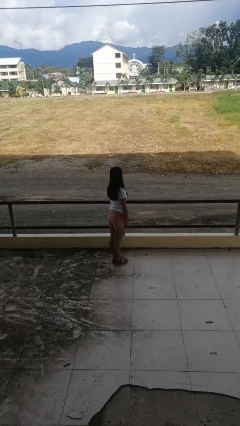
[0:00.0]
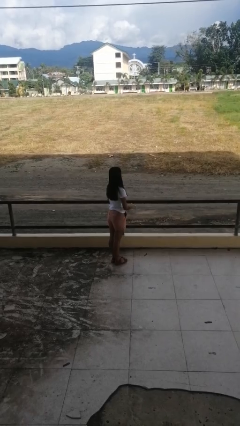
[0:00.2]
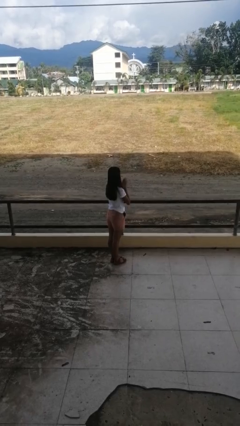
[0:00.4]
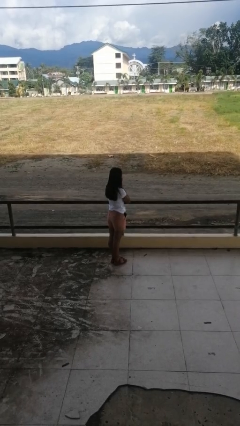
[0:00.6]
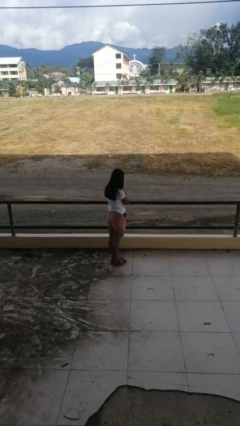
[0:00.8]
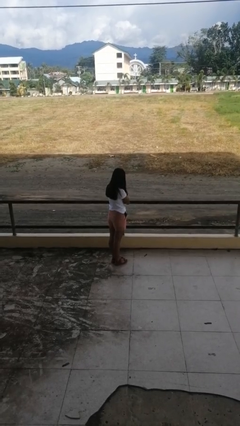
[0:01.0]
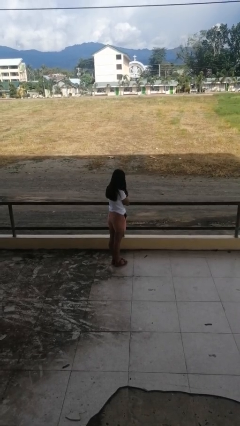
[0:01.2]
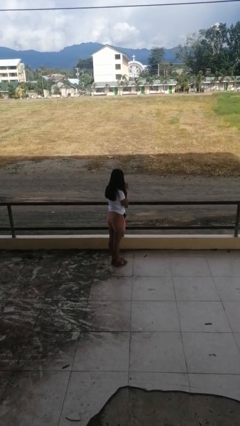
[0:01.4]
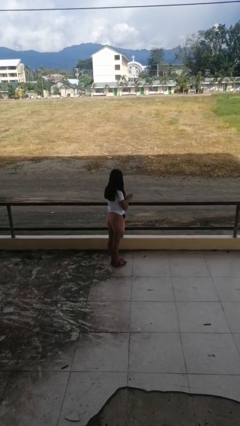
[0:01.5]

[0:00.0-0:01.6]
person sneezes into hand

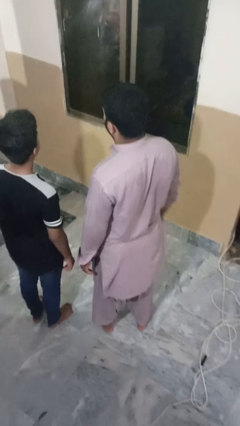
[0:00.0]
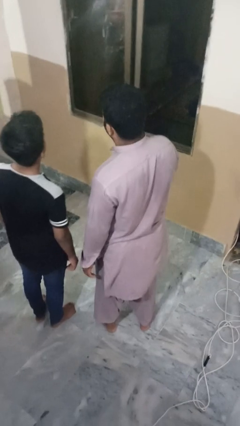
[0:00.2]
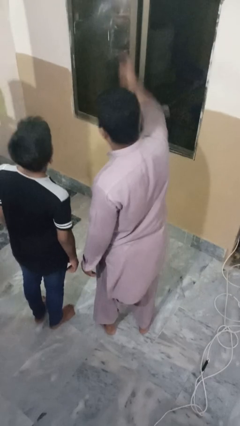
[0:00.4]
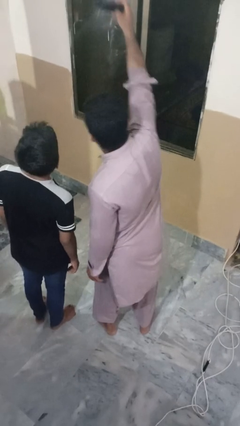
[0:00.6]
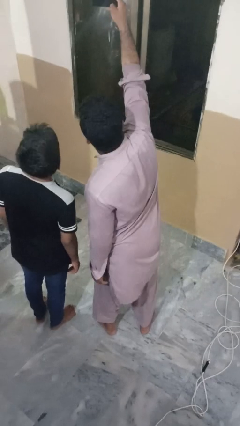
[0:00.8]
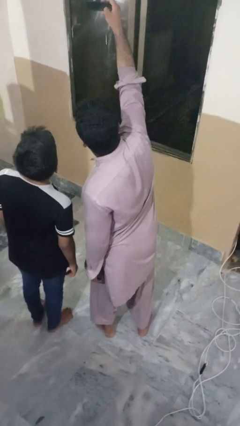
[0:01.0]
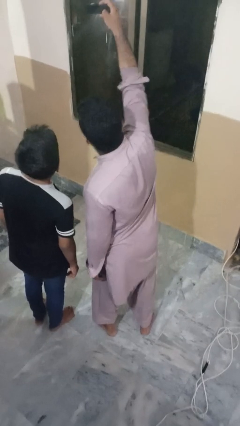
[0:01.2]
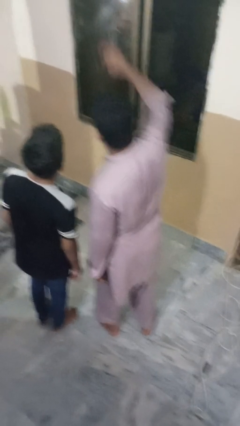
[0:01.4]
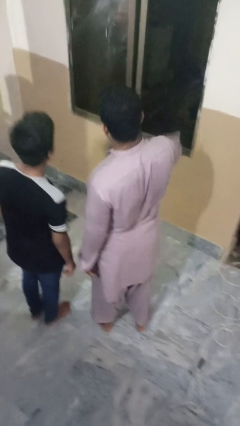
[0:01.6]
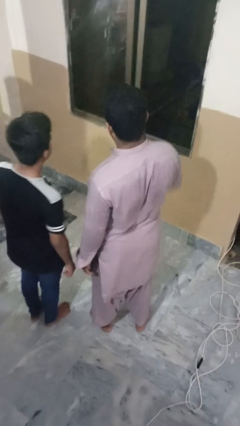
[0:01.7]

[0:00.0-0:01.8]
person takes selfie with person

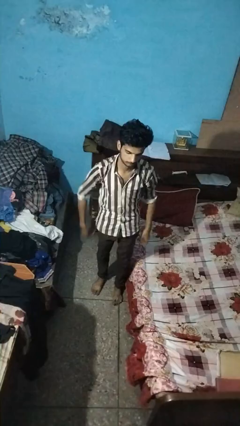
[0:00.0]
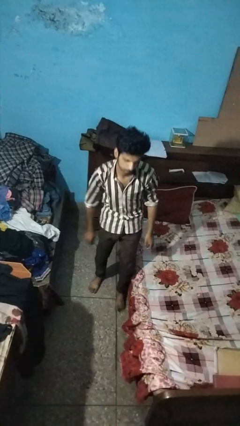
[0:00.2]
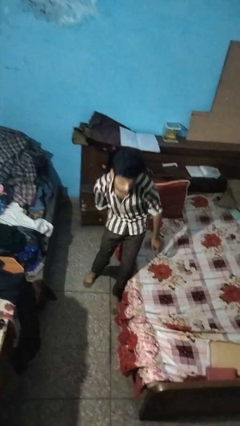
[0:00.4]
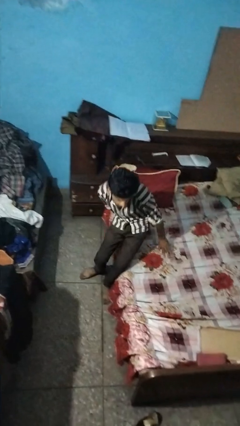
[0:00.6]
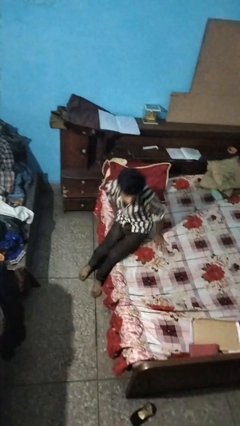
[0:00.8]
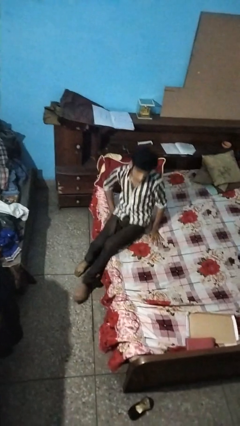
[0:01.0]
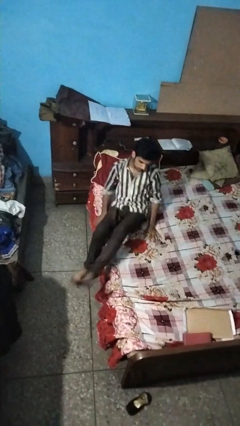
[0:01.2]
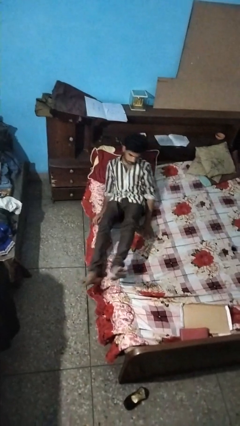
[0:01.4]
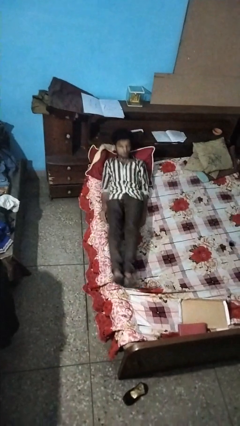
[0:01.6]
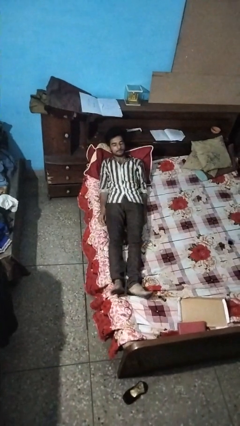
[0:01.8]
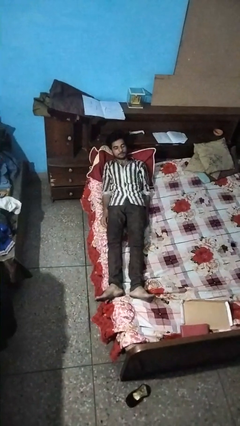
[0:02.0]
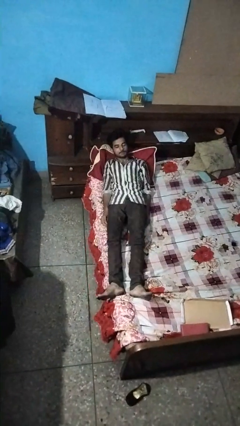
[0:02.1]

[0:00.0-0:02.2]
person lies down on bed

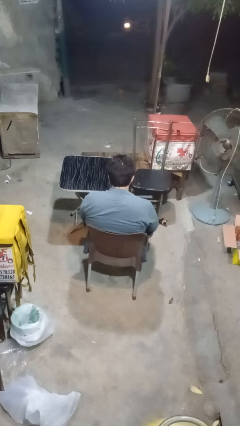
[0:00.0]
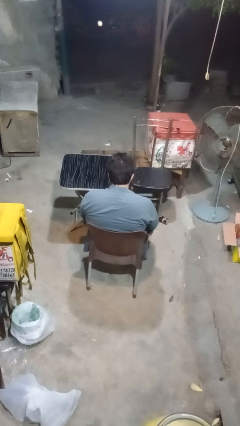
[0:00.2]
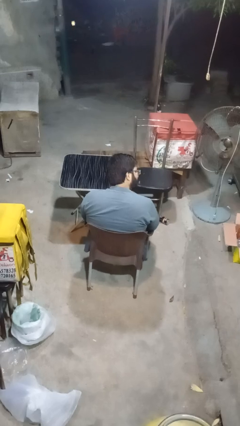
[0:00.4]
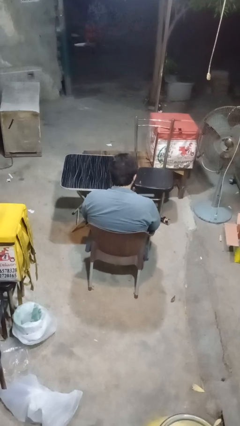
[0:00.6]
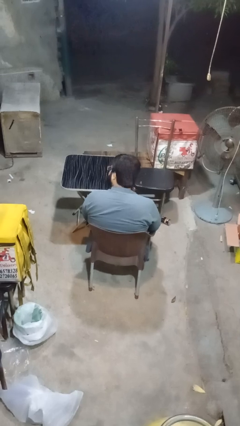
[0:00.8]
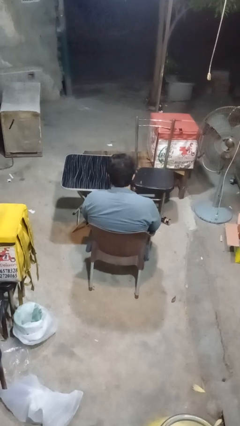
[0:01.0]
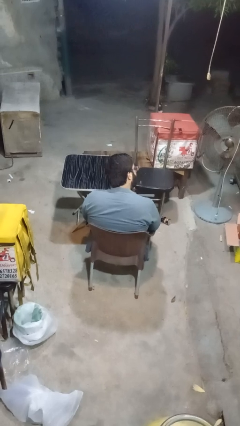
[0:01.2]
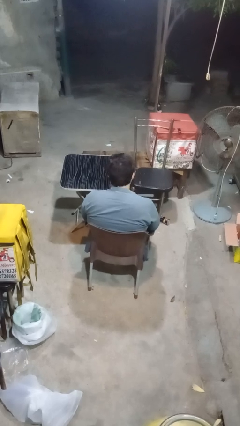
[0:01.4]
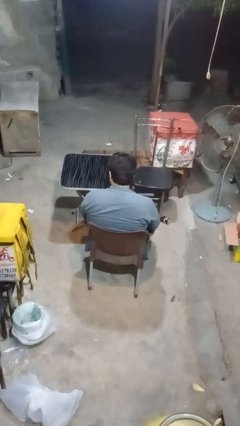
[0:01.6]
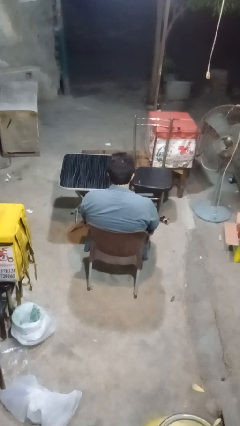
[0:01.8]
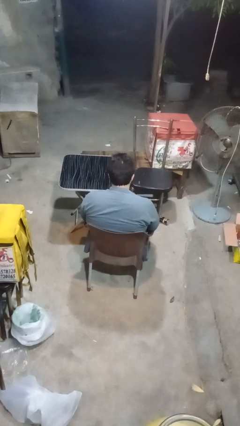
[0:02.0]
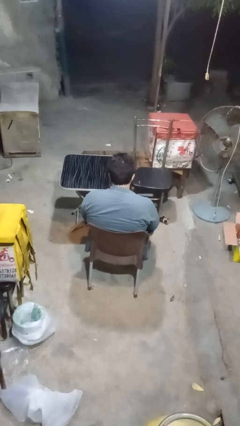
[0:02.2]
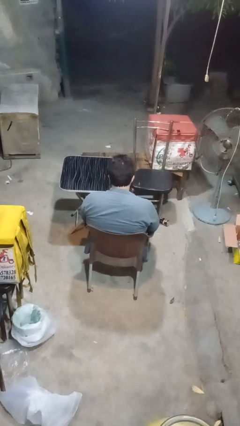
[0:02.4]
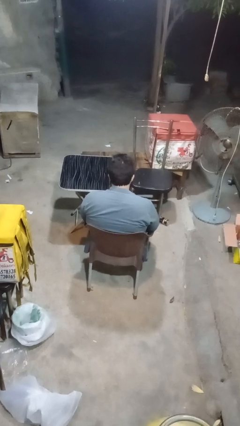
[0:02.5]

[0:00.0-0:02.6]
person shakes head

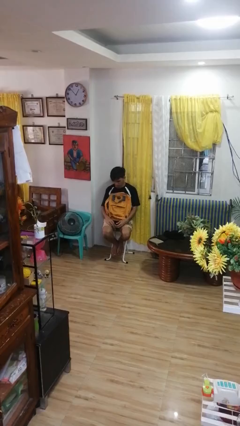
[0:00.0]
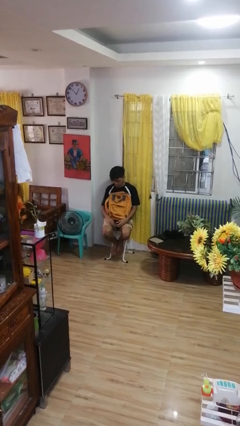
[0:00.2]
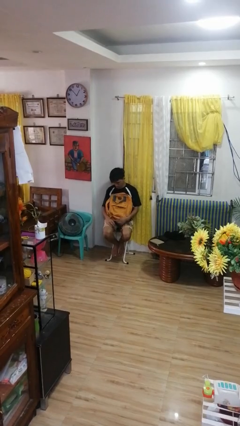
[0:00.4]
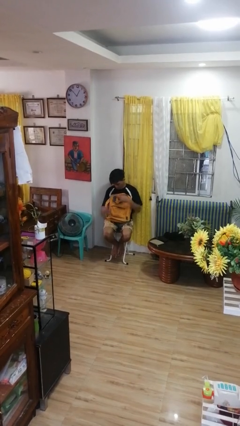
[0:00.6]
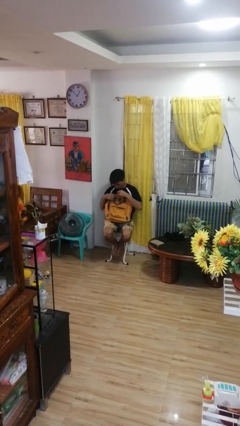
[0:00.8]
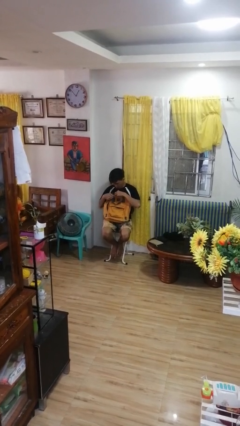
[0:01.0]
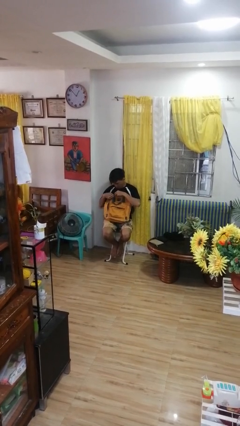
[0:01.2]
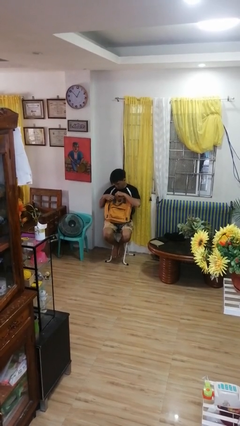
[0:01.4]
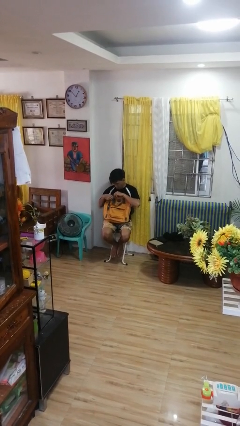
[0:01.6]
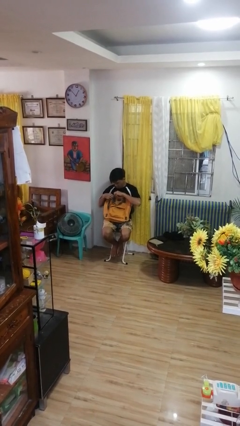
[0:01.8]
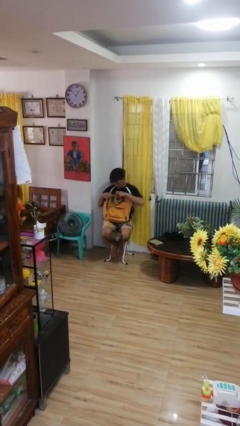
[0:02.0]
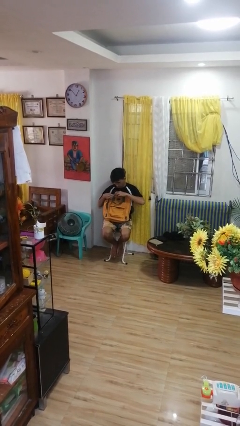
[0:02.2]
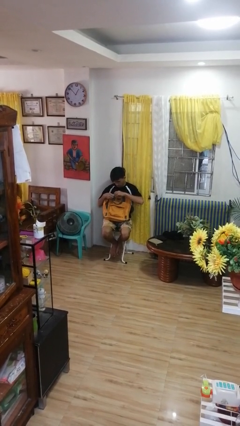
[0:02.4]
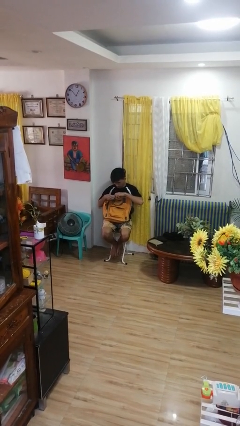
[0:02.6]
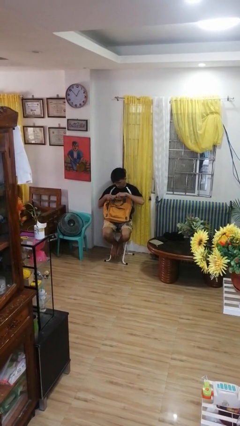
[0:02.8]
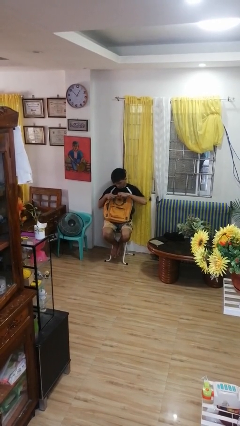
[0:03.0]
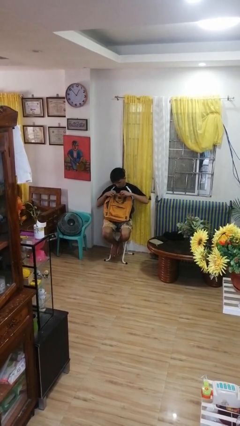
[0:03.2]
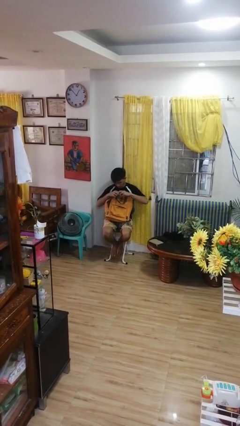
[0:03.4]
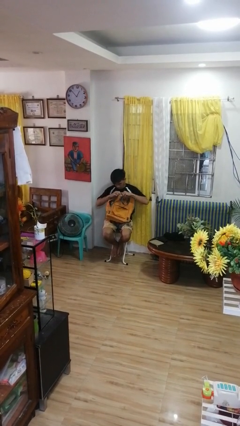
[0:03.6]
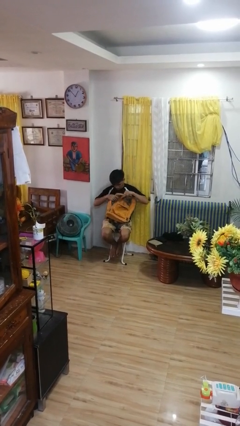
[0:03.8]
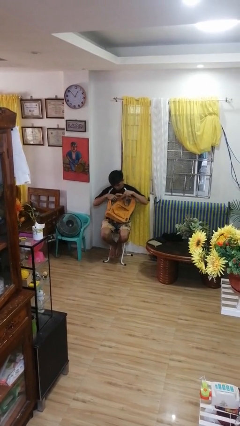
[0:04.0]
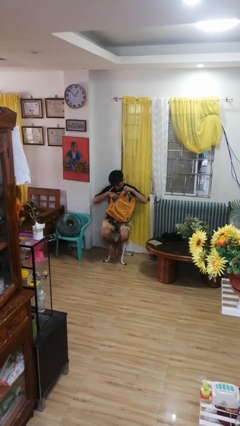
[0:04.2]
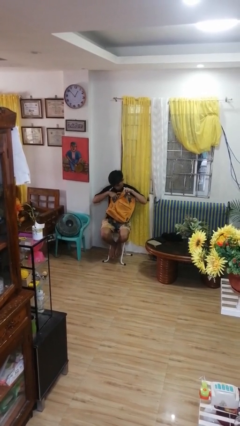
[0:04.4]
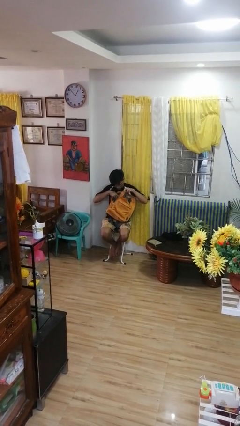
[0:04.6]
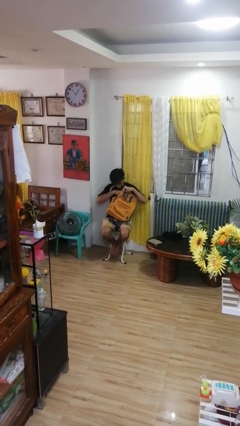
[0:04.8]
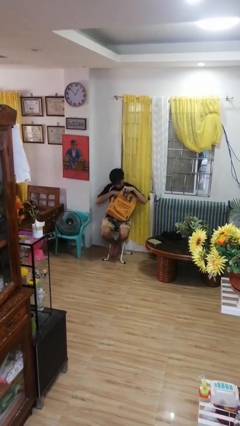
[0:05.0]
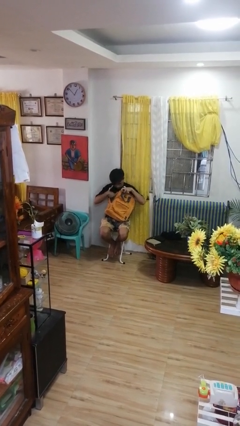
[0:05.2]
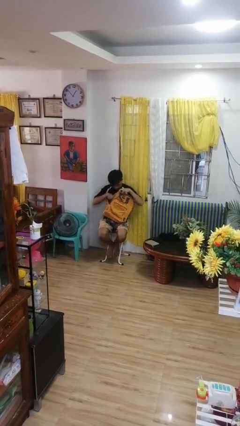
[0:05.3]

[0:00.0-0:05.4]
person searches in backpack

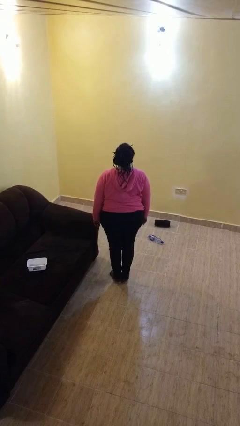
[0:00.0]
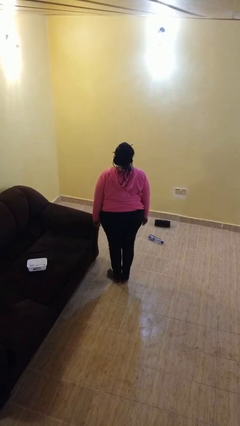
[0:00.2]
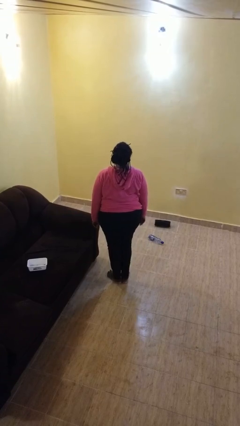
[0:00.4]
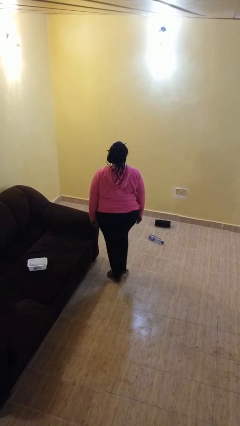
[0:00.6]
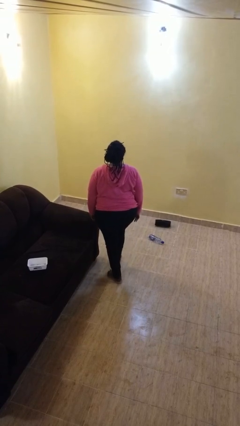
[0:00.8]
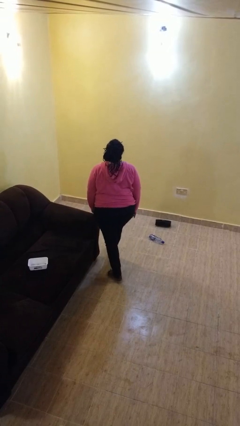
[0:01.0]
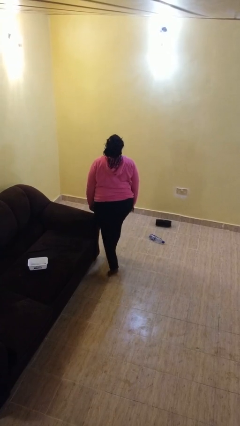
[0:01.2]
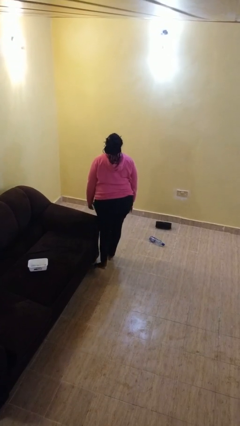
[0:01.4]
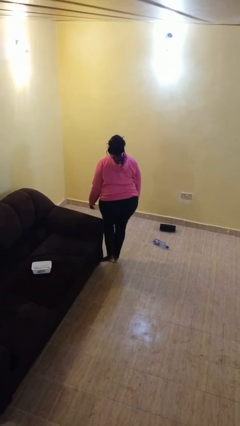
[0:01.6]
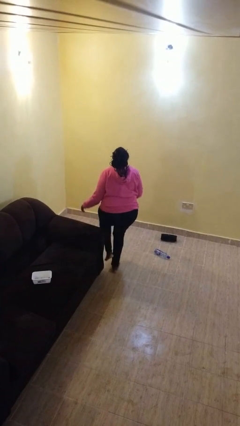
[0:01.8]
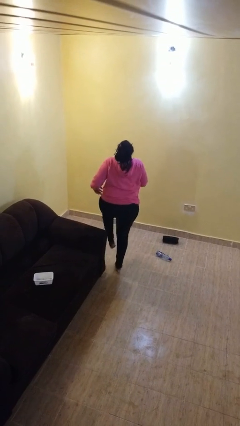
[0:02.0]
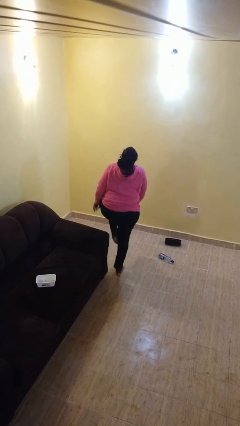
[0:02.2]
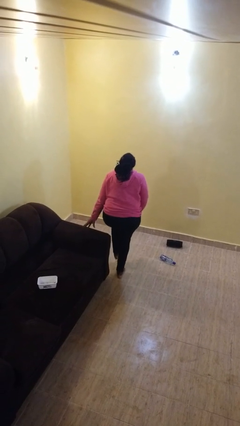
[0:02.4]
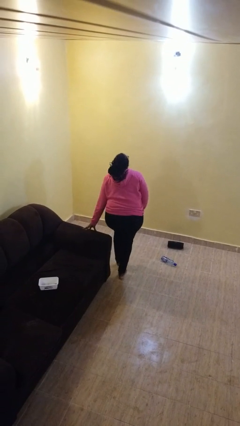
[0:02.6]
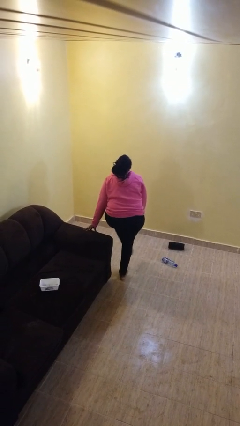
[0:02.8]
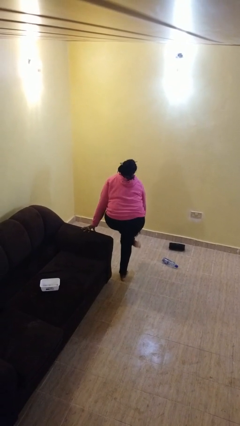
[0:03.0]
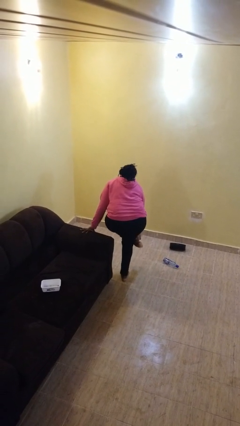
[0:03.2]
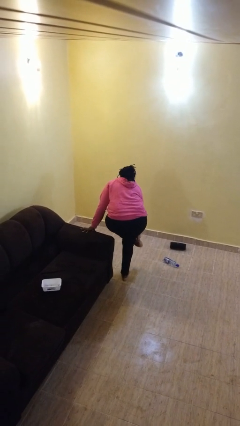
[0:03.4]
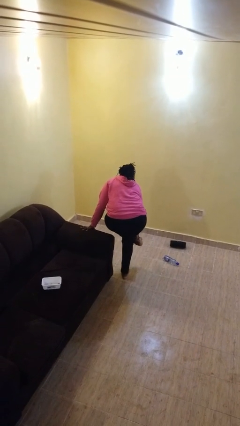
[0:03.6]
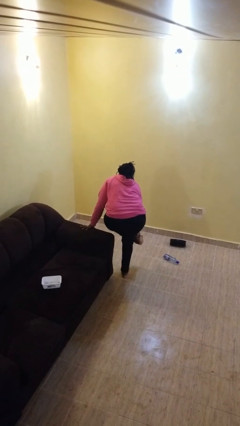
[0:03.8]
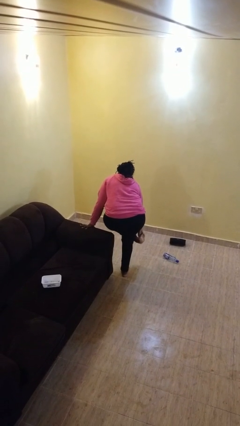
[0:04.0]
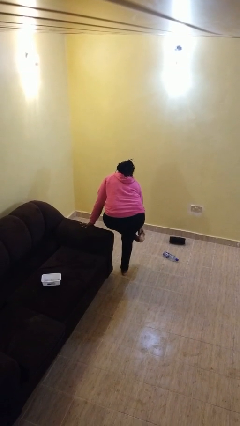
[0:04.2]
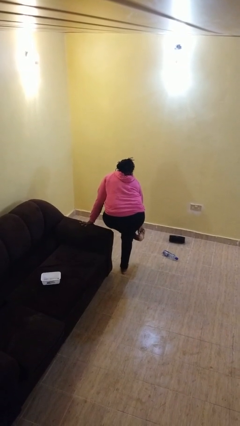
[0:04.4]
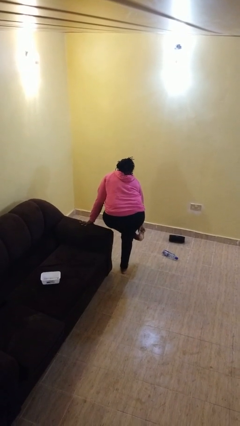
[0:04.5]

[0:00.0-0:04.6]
person stubs toe
